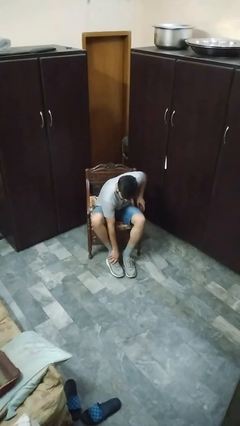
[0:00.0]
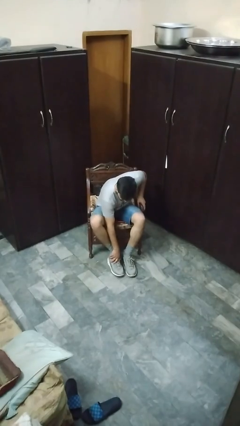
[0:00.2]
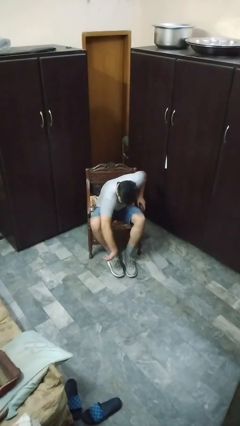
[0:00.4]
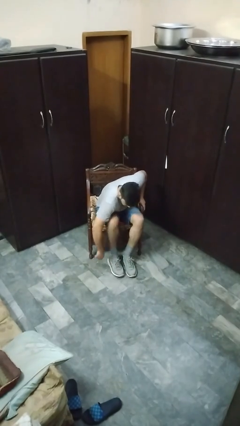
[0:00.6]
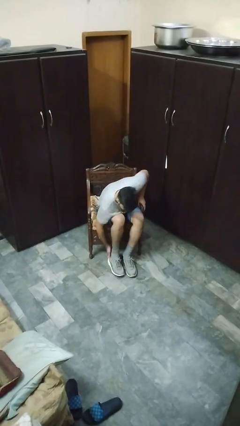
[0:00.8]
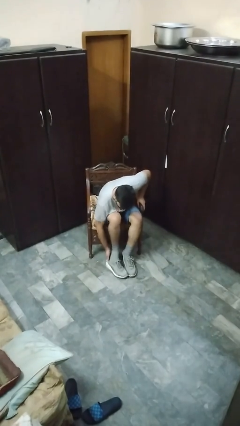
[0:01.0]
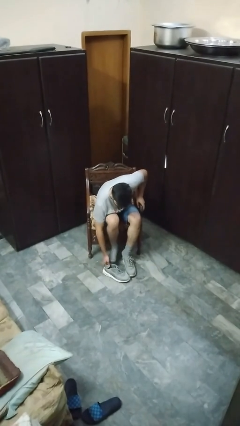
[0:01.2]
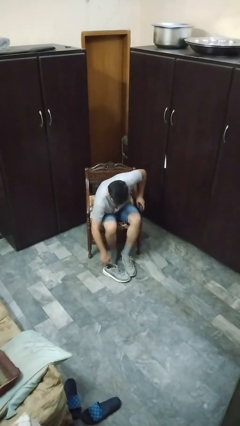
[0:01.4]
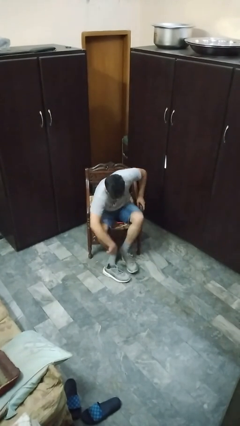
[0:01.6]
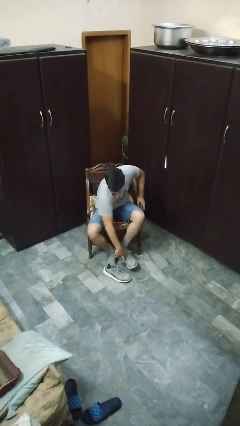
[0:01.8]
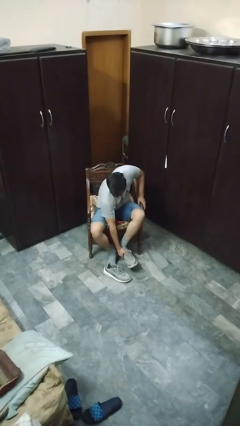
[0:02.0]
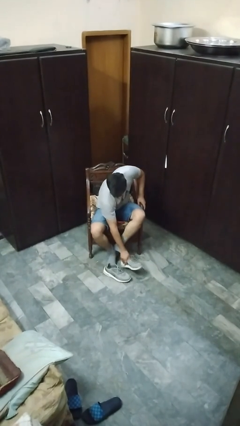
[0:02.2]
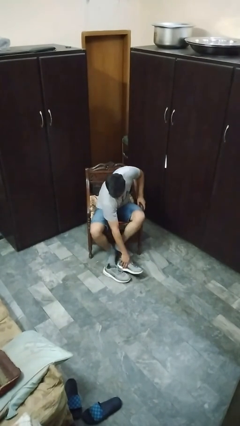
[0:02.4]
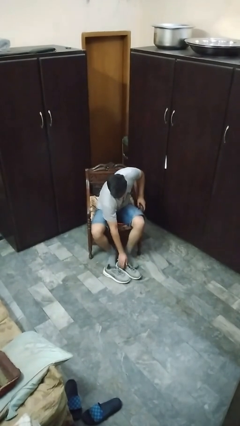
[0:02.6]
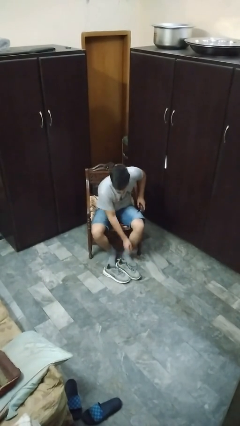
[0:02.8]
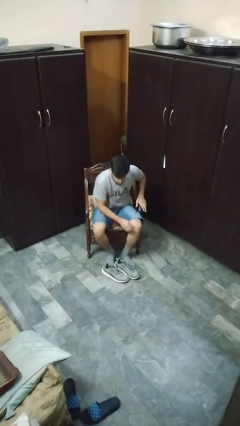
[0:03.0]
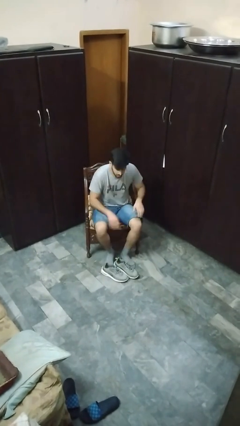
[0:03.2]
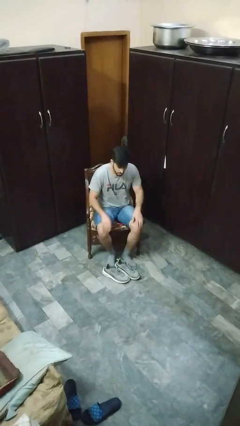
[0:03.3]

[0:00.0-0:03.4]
person takes off shoes

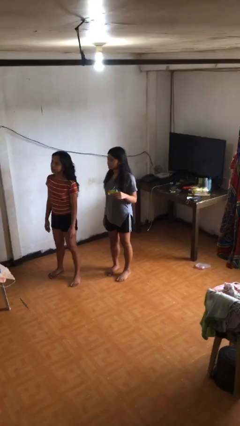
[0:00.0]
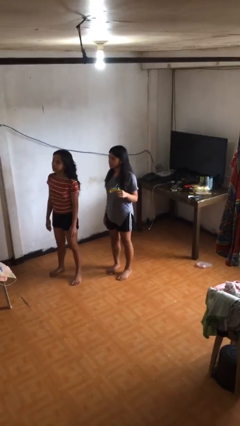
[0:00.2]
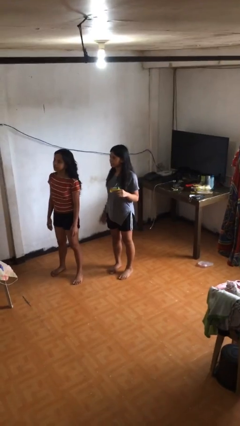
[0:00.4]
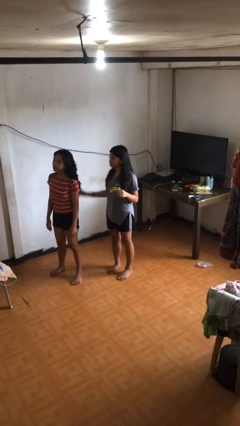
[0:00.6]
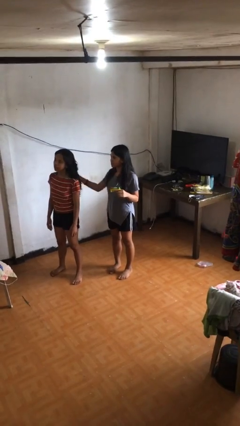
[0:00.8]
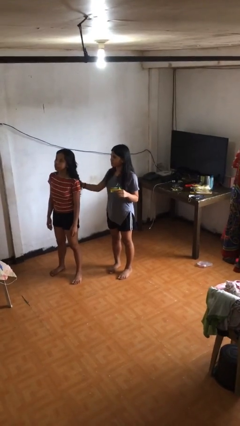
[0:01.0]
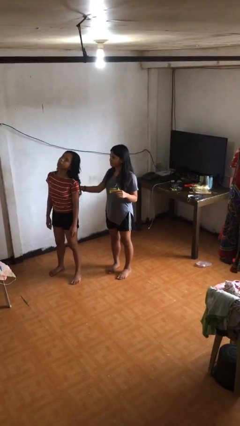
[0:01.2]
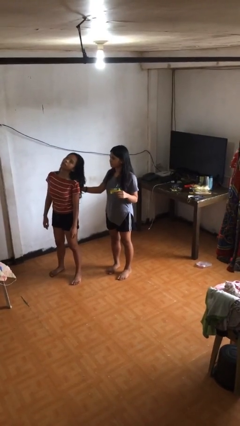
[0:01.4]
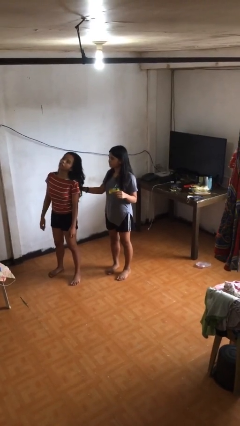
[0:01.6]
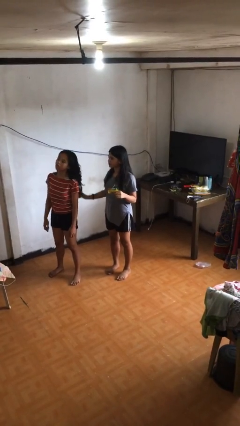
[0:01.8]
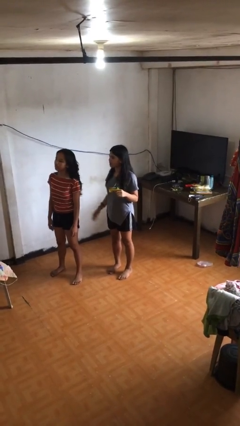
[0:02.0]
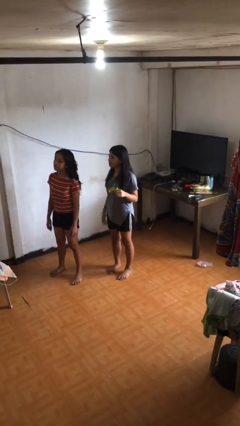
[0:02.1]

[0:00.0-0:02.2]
person grabs person by hair

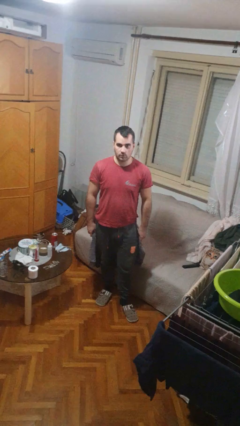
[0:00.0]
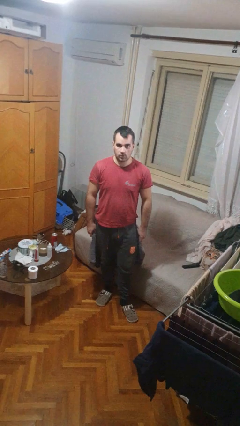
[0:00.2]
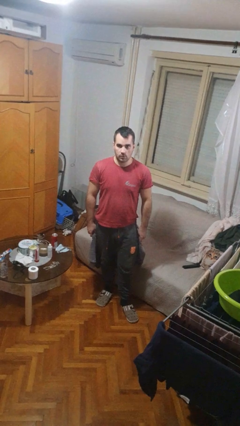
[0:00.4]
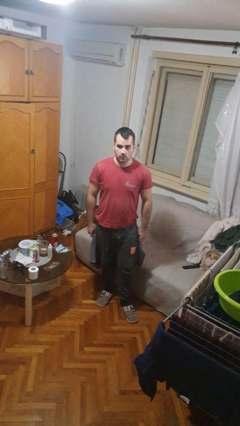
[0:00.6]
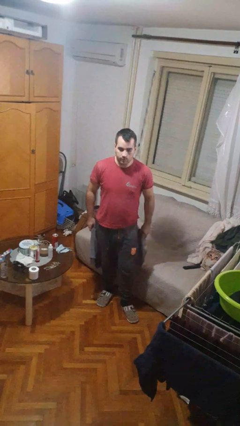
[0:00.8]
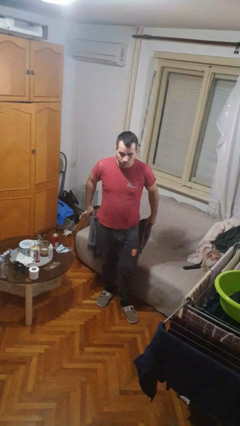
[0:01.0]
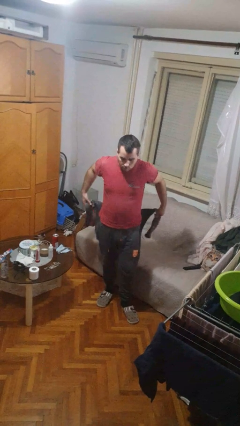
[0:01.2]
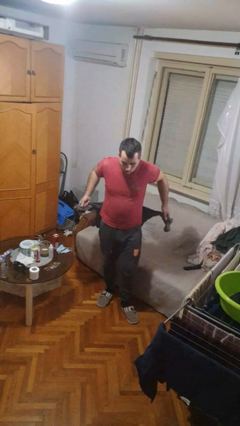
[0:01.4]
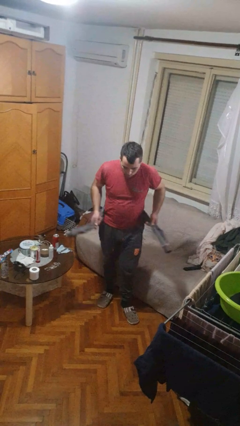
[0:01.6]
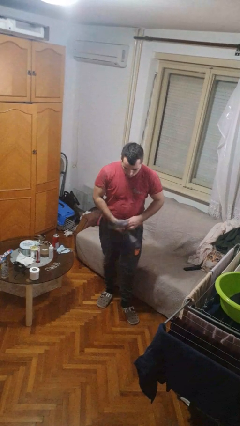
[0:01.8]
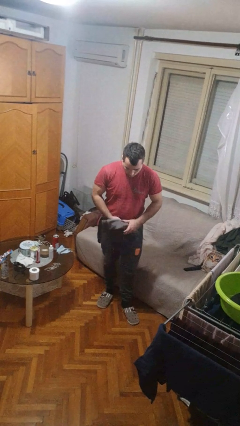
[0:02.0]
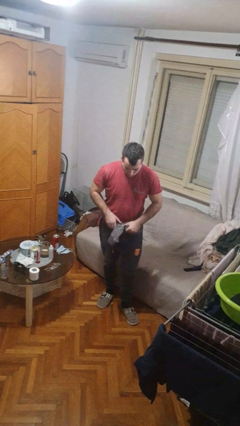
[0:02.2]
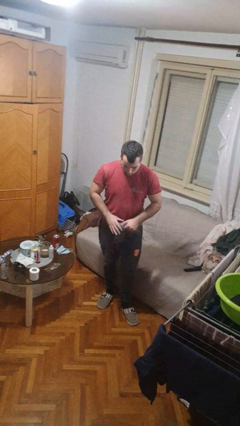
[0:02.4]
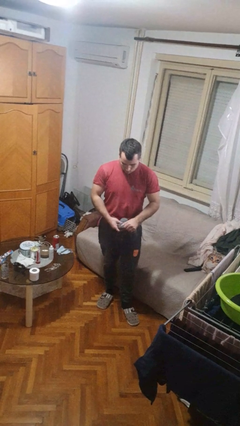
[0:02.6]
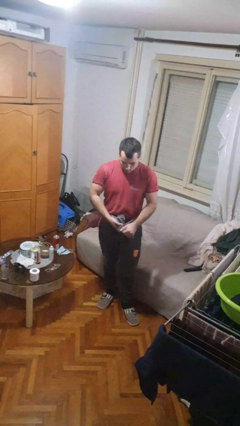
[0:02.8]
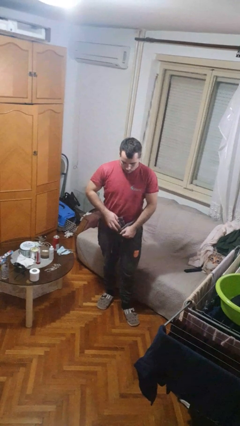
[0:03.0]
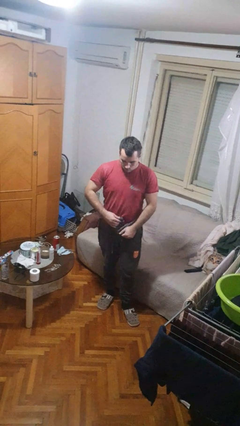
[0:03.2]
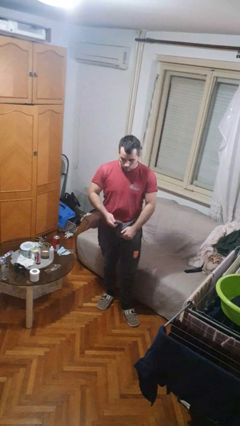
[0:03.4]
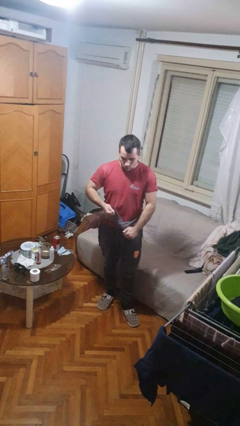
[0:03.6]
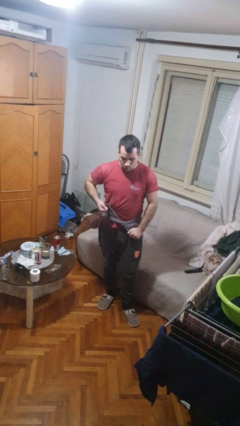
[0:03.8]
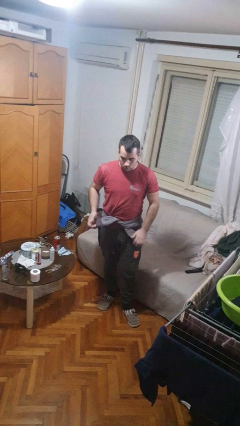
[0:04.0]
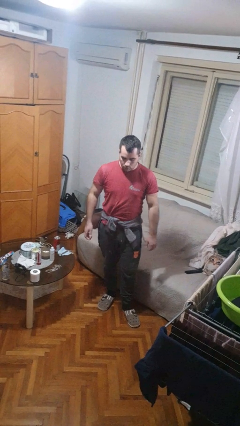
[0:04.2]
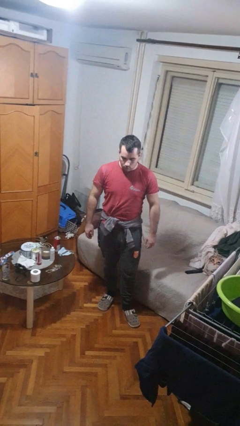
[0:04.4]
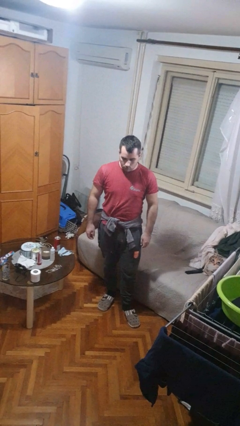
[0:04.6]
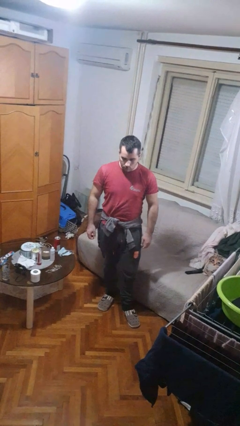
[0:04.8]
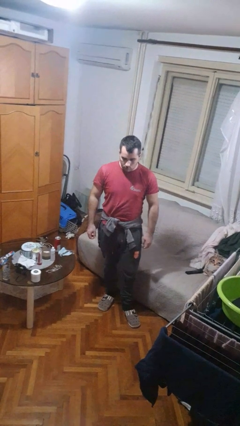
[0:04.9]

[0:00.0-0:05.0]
person ties jacket around waist

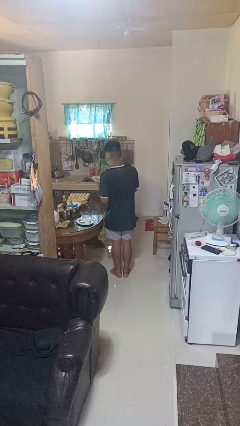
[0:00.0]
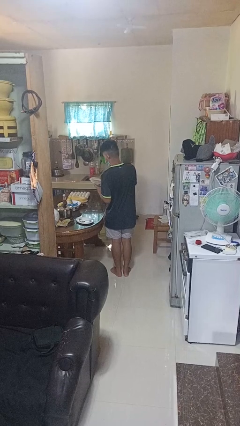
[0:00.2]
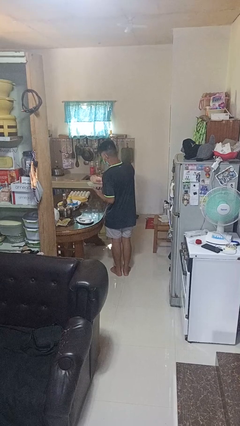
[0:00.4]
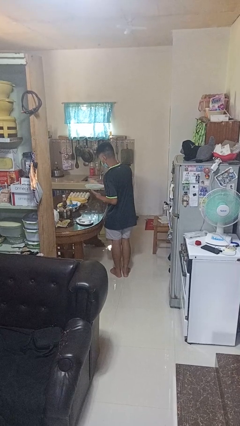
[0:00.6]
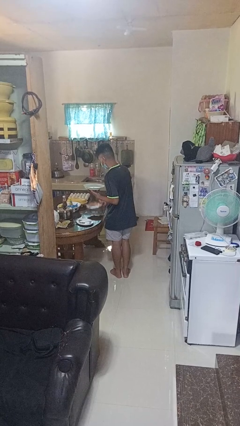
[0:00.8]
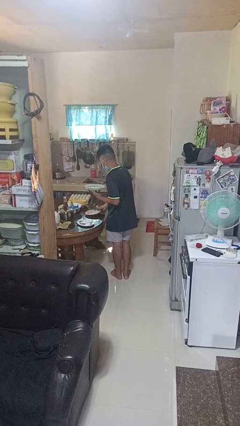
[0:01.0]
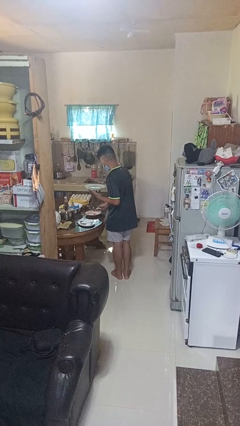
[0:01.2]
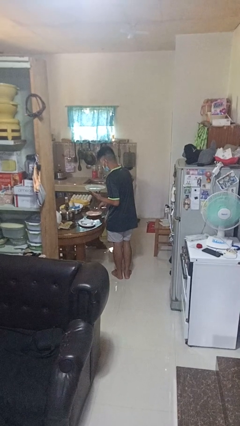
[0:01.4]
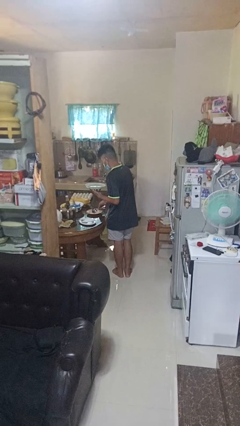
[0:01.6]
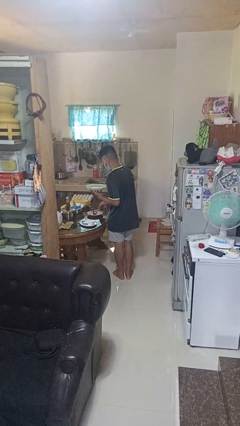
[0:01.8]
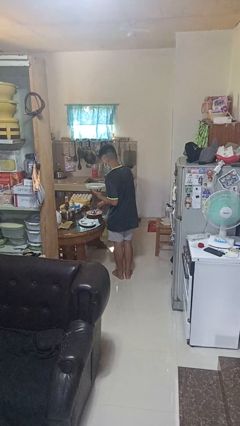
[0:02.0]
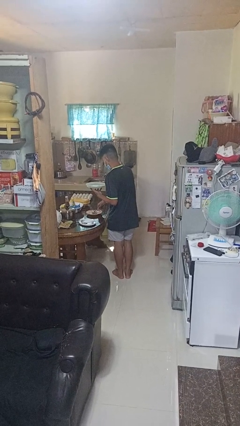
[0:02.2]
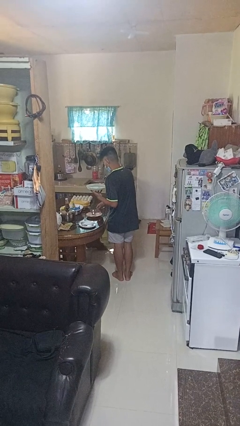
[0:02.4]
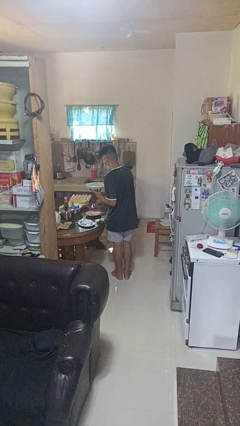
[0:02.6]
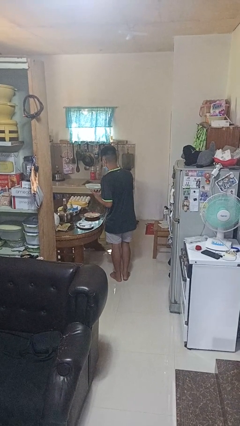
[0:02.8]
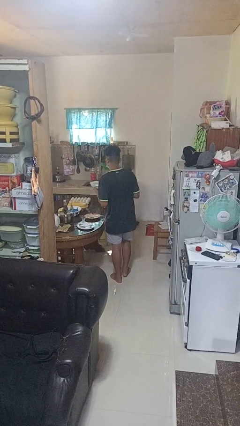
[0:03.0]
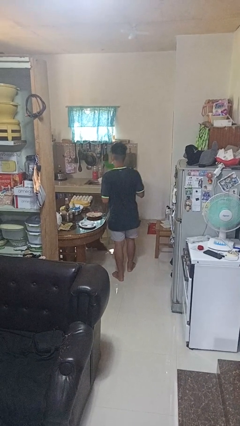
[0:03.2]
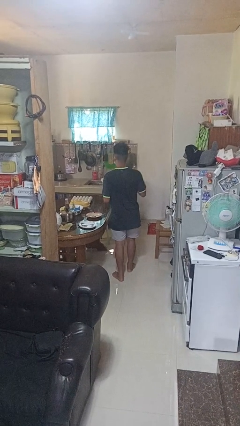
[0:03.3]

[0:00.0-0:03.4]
person sets table

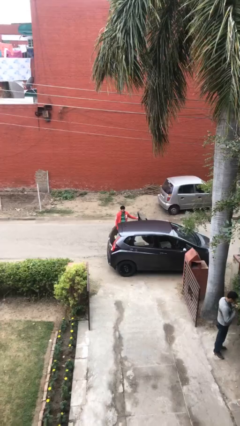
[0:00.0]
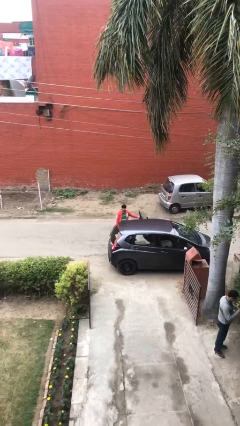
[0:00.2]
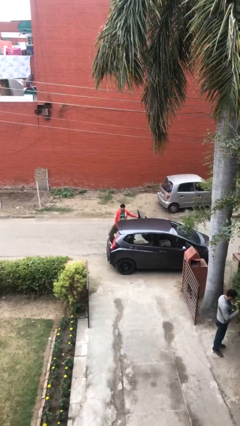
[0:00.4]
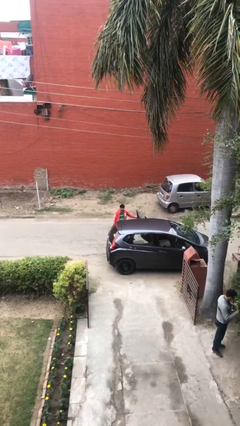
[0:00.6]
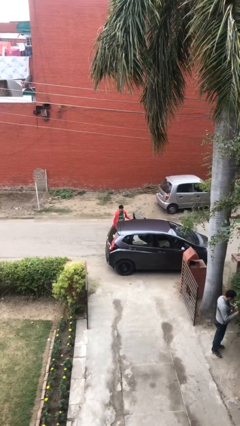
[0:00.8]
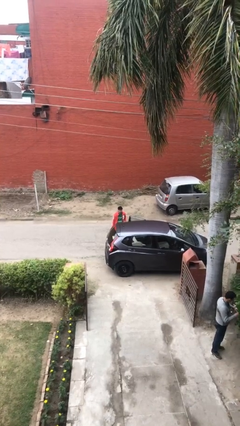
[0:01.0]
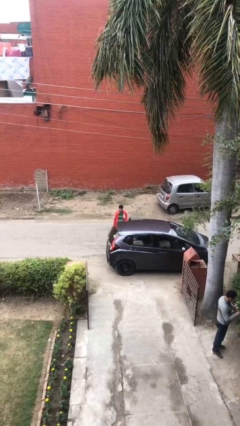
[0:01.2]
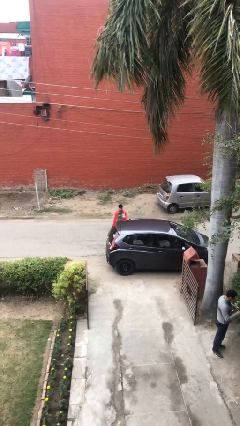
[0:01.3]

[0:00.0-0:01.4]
person closes car door

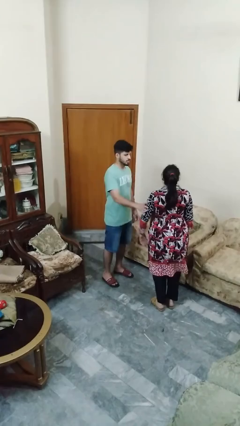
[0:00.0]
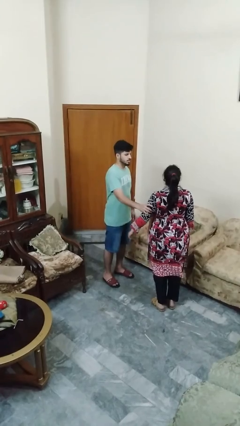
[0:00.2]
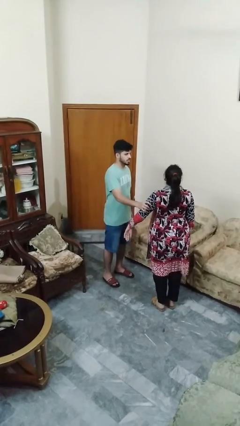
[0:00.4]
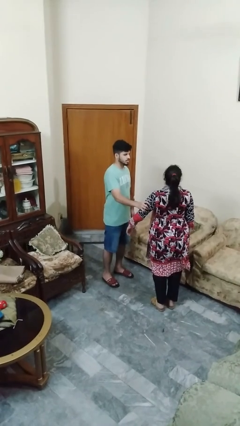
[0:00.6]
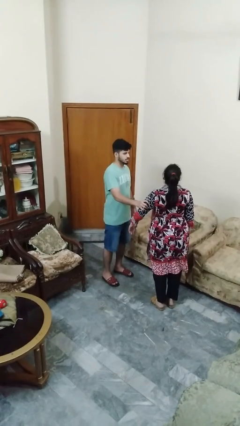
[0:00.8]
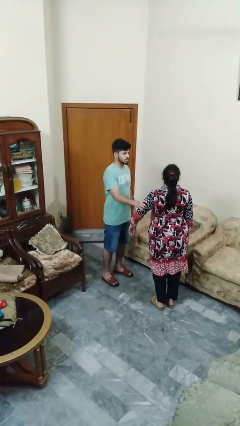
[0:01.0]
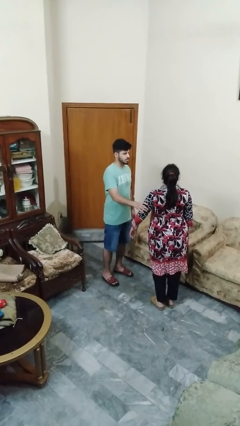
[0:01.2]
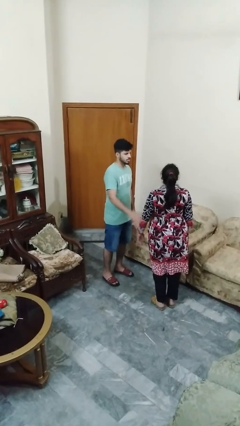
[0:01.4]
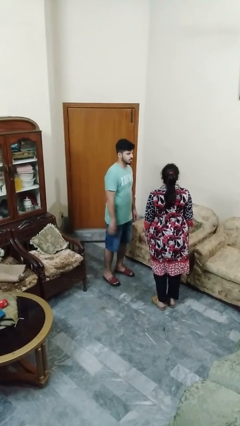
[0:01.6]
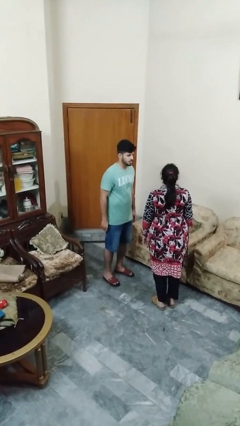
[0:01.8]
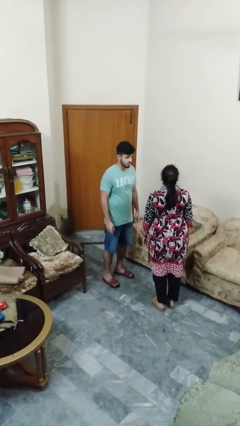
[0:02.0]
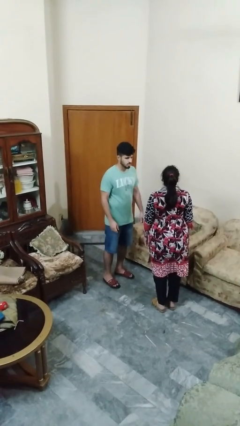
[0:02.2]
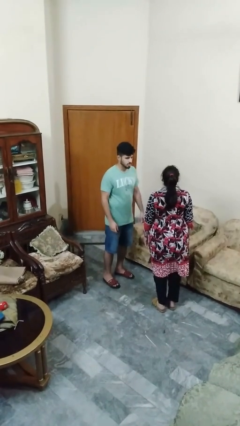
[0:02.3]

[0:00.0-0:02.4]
person grabs person by bicep
